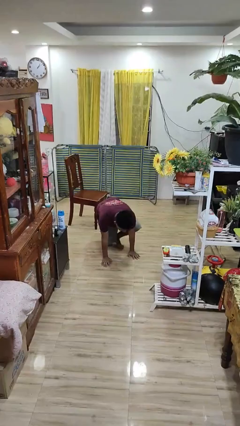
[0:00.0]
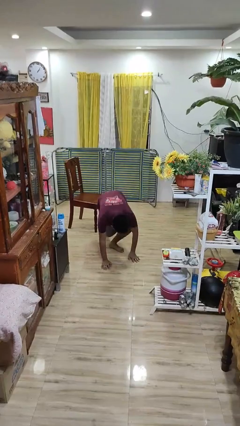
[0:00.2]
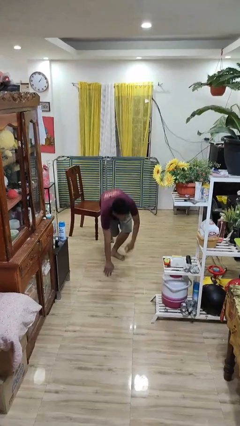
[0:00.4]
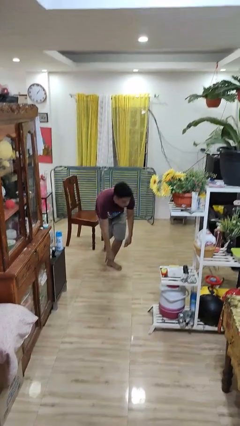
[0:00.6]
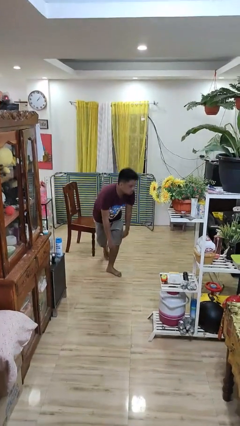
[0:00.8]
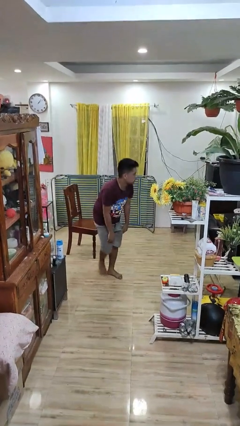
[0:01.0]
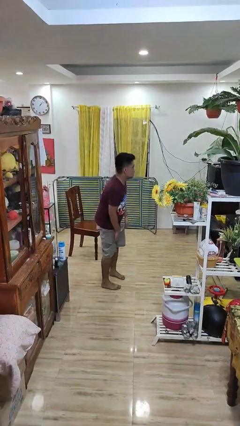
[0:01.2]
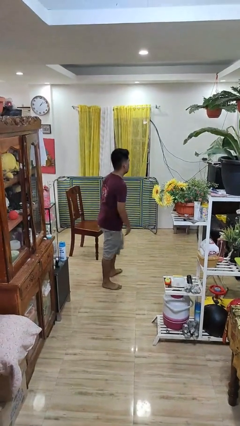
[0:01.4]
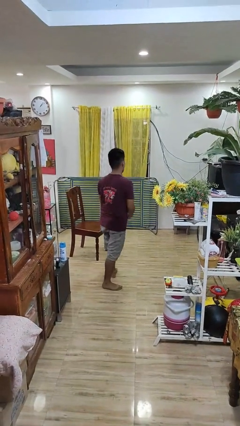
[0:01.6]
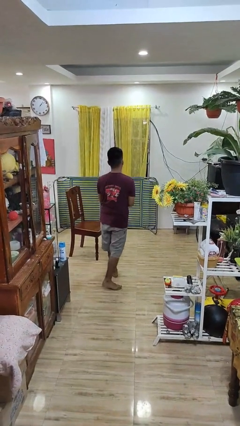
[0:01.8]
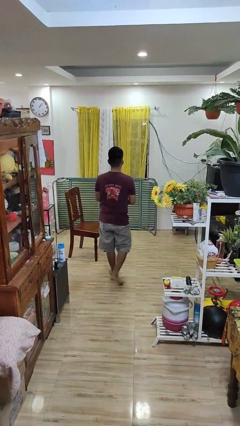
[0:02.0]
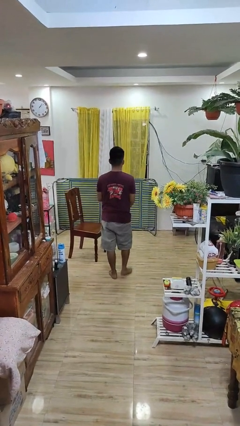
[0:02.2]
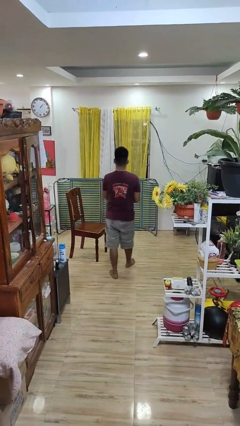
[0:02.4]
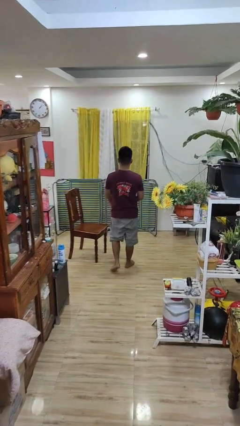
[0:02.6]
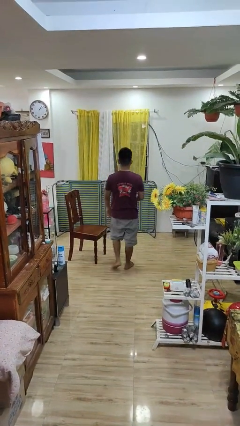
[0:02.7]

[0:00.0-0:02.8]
person stands up from floor

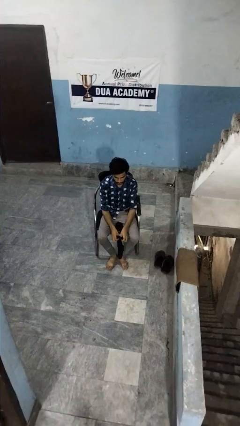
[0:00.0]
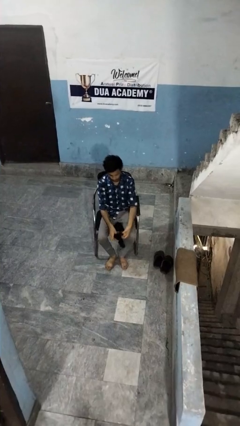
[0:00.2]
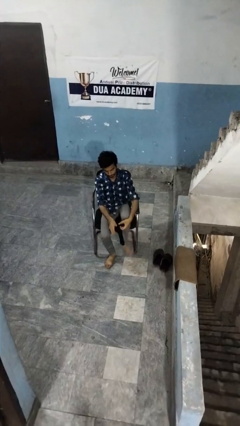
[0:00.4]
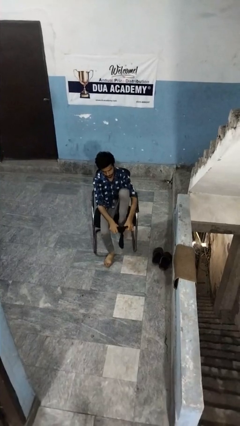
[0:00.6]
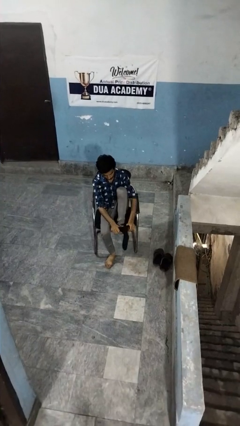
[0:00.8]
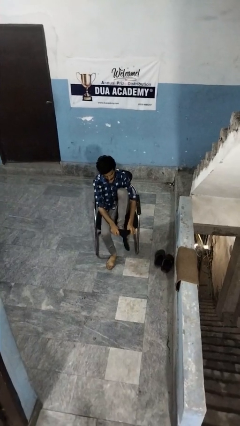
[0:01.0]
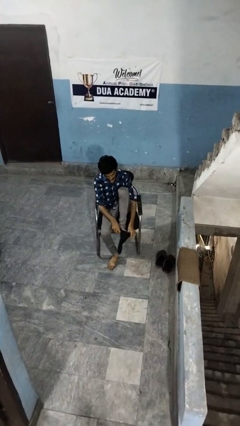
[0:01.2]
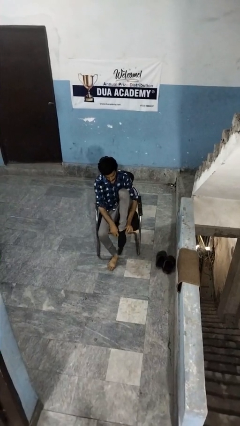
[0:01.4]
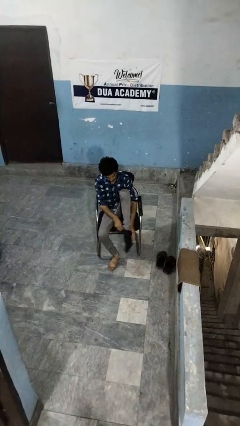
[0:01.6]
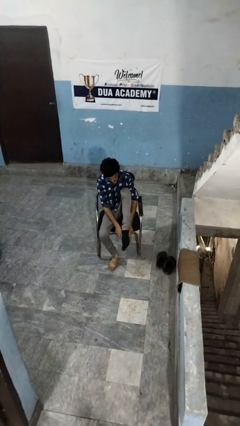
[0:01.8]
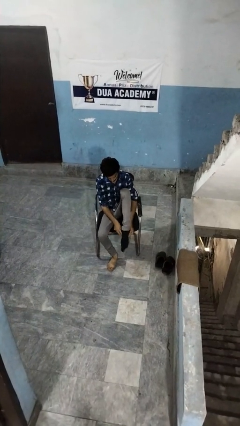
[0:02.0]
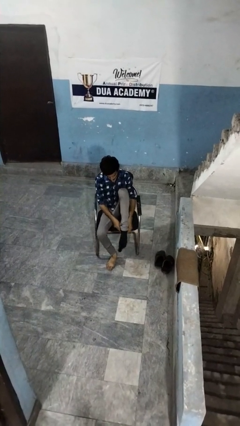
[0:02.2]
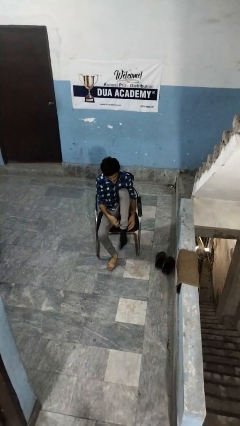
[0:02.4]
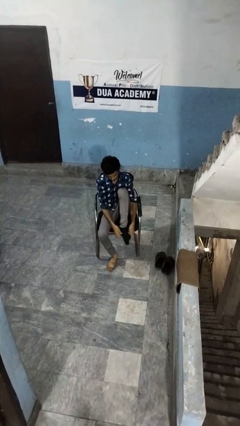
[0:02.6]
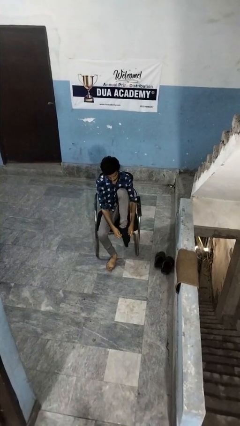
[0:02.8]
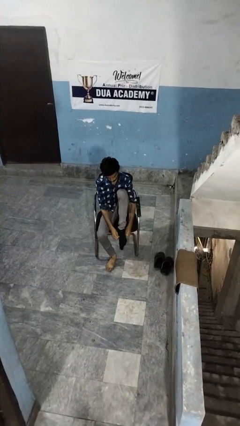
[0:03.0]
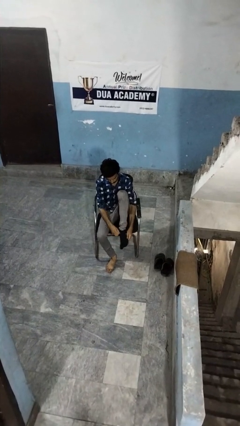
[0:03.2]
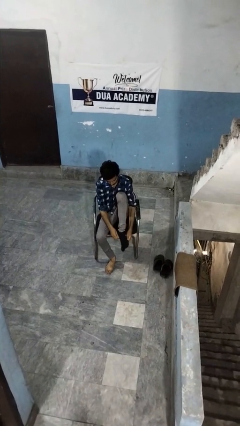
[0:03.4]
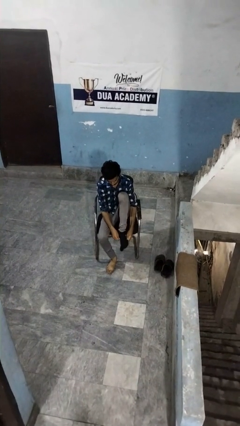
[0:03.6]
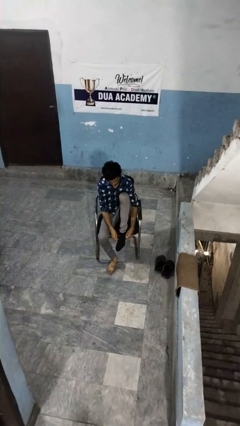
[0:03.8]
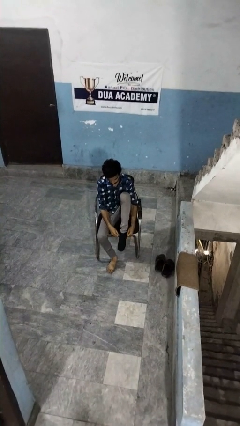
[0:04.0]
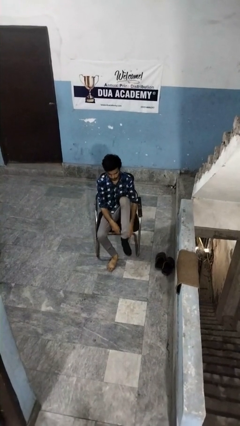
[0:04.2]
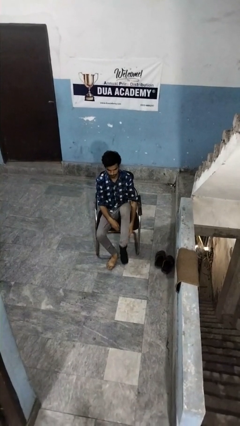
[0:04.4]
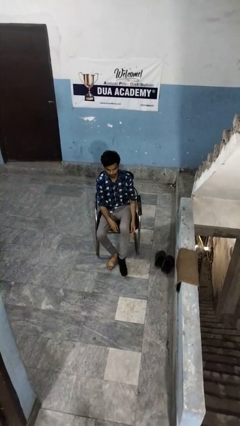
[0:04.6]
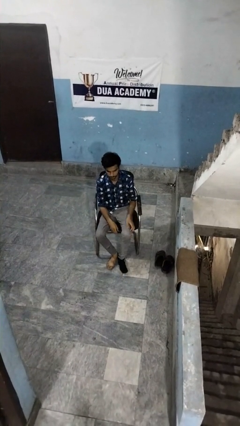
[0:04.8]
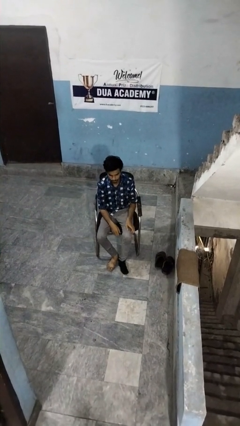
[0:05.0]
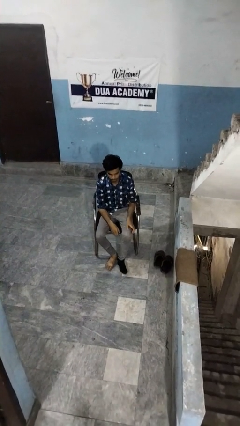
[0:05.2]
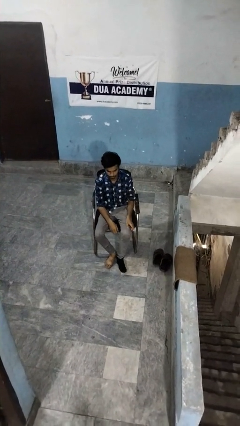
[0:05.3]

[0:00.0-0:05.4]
person puts on socks

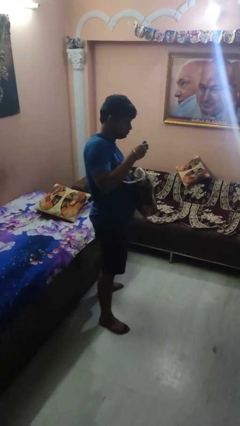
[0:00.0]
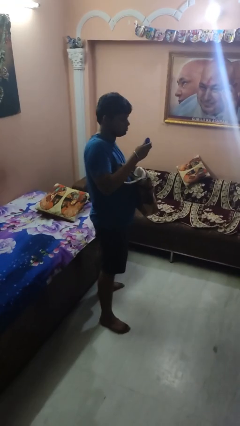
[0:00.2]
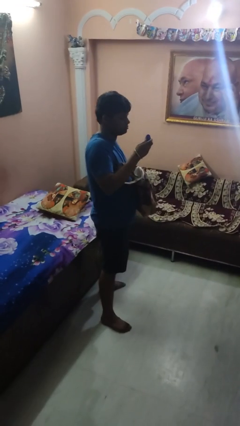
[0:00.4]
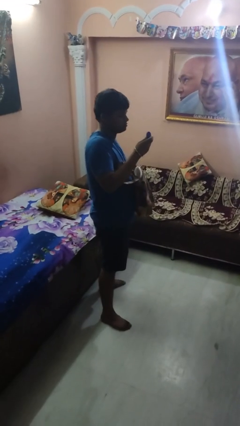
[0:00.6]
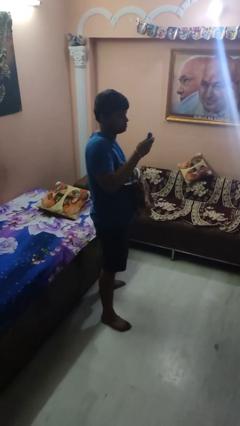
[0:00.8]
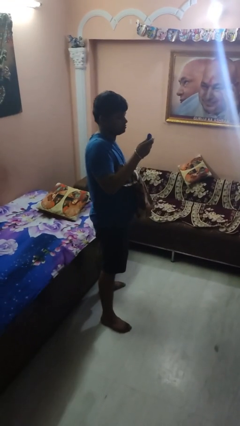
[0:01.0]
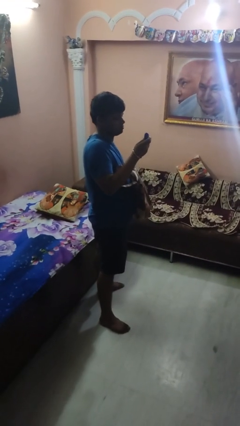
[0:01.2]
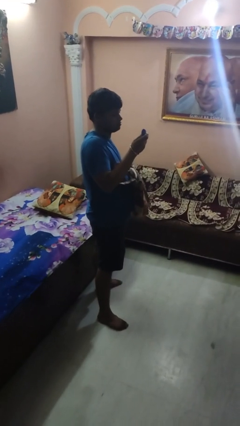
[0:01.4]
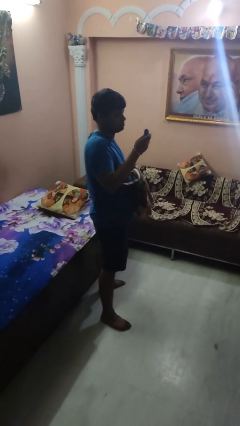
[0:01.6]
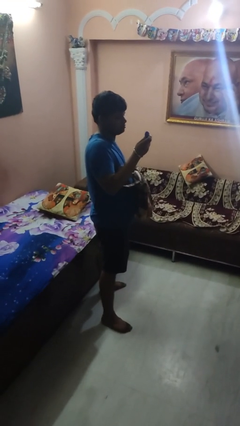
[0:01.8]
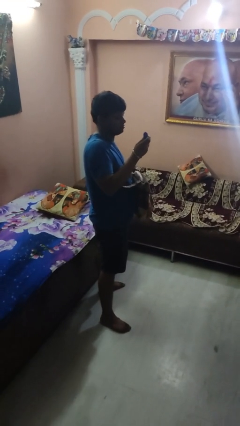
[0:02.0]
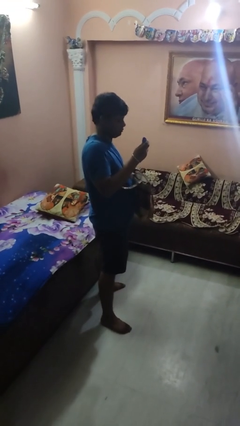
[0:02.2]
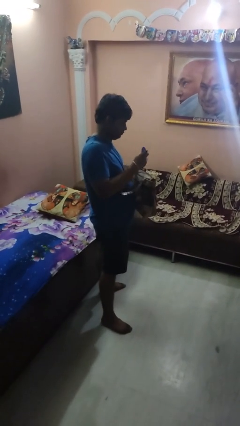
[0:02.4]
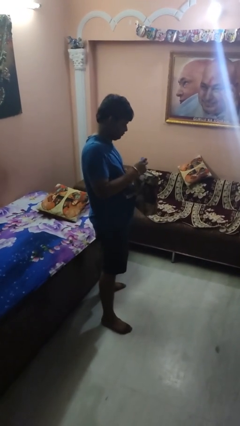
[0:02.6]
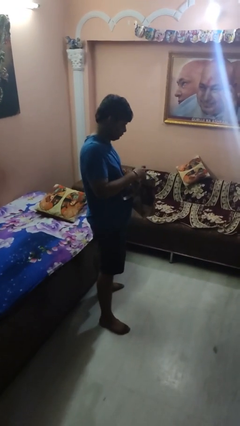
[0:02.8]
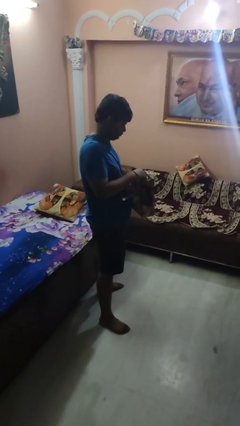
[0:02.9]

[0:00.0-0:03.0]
person takes object from purse

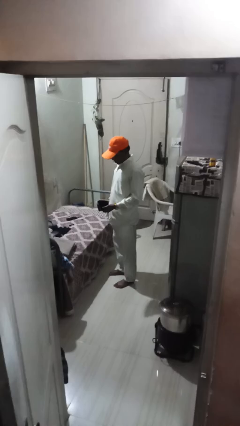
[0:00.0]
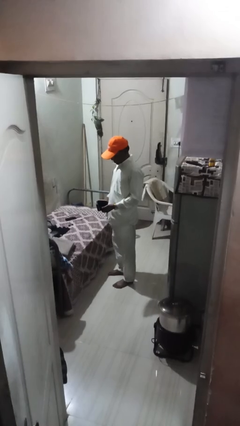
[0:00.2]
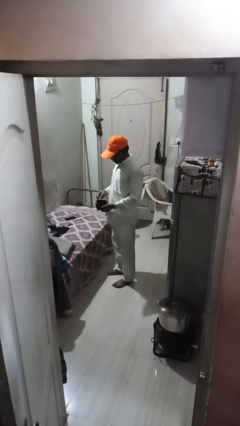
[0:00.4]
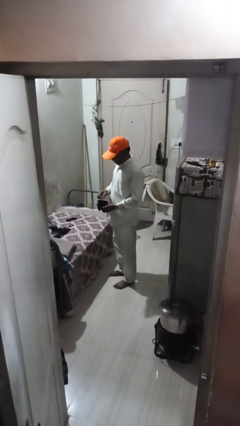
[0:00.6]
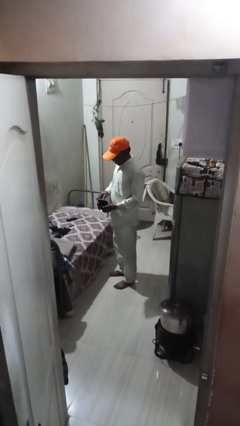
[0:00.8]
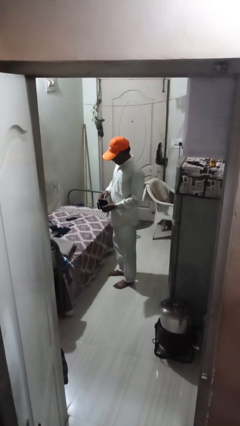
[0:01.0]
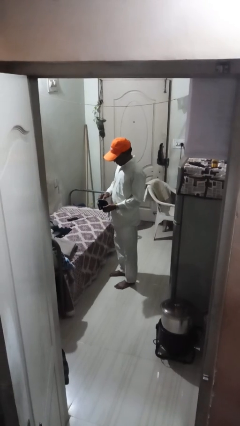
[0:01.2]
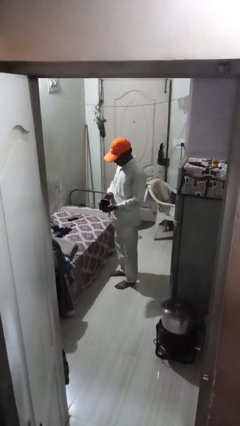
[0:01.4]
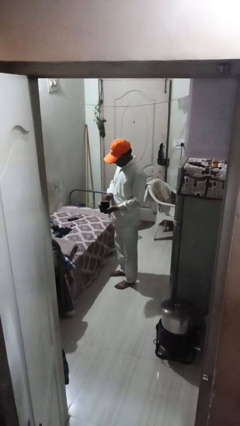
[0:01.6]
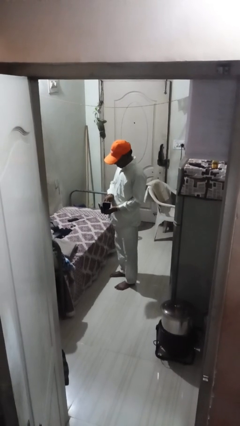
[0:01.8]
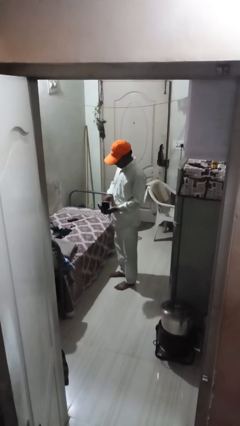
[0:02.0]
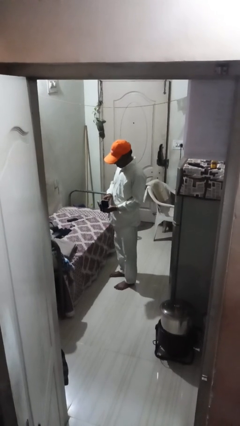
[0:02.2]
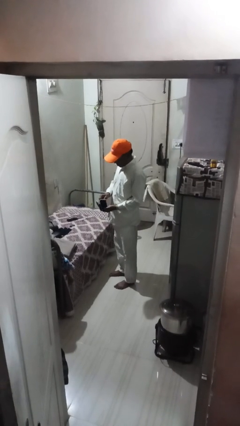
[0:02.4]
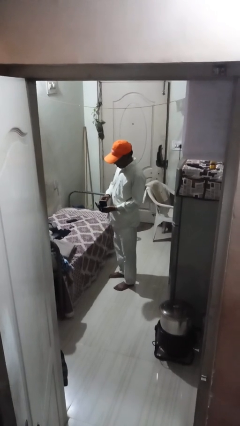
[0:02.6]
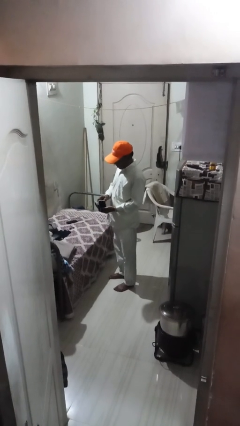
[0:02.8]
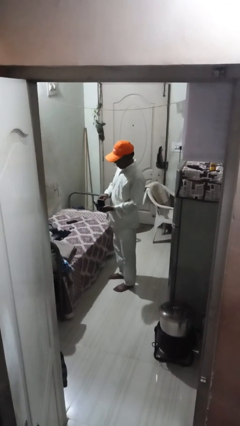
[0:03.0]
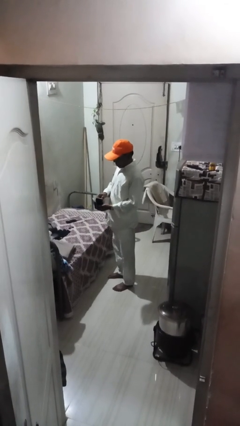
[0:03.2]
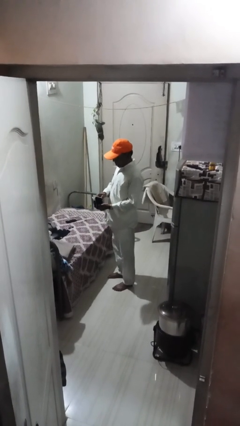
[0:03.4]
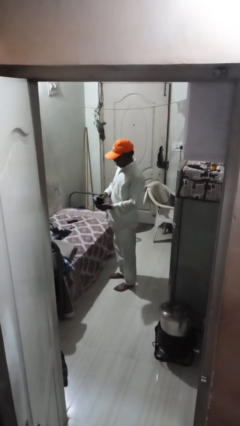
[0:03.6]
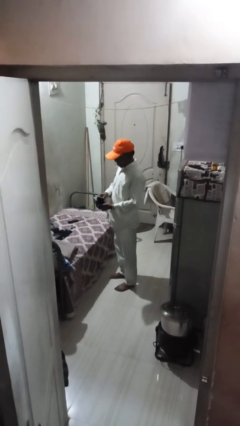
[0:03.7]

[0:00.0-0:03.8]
person searches in purse

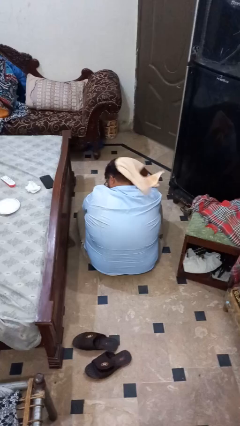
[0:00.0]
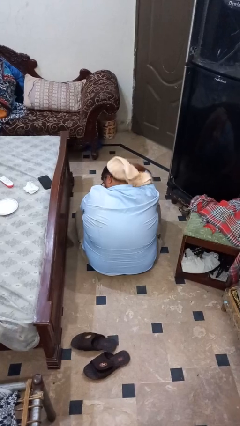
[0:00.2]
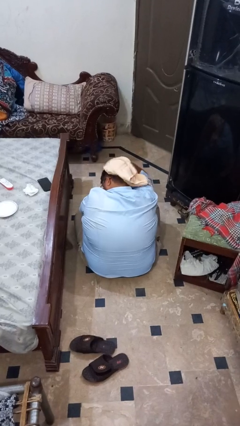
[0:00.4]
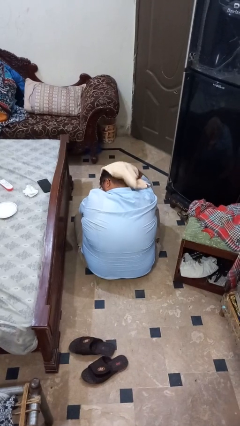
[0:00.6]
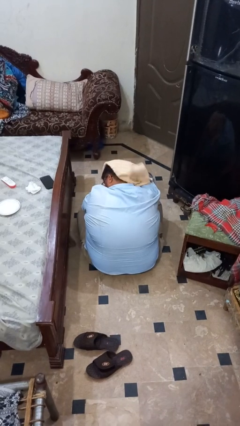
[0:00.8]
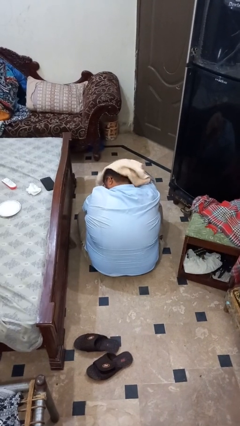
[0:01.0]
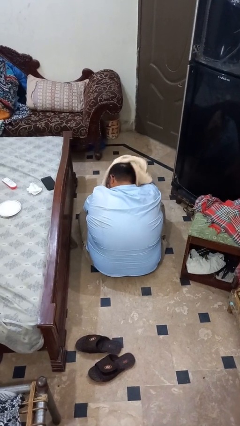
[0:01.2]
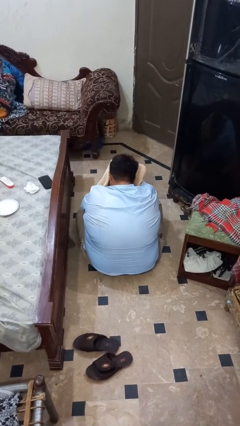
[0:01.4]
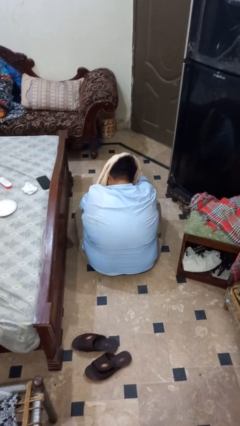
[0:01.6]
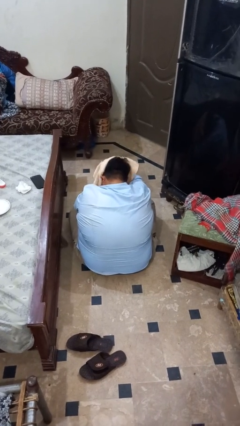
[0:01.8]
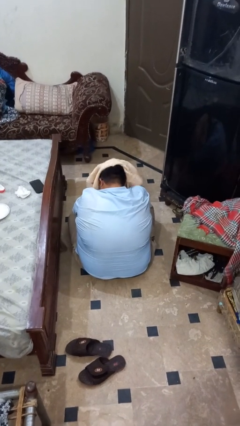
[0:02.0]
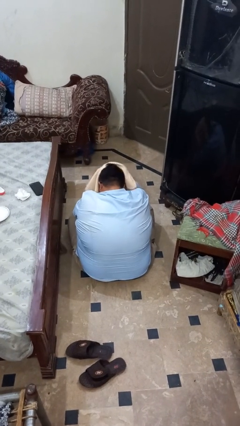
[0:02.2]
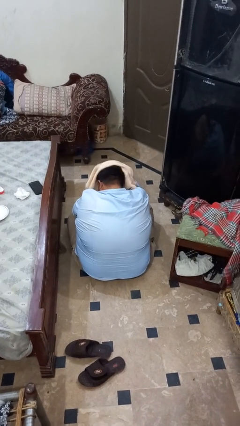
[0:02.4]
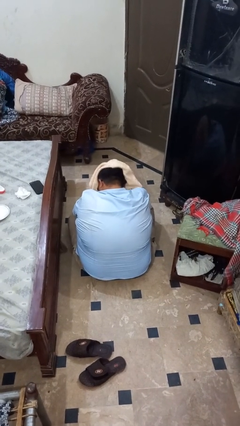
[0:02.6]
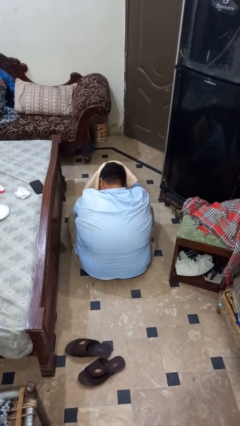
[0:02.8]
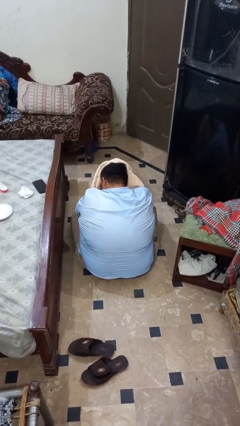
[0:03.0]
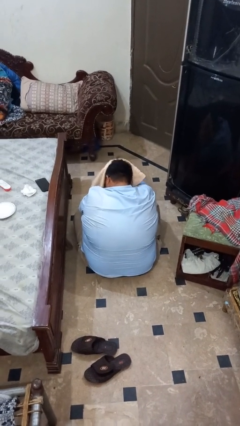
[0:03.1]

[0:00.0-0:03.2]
person dries hair with towel
